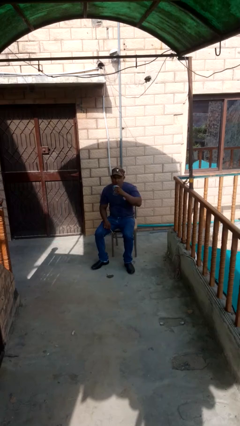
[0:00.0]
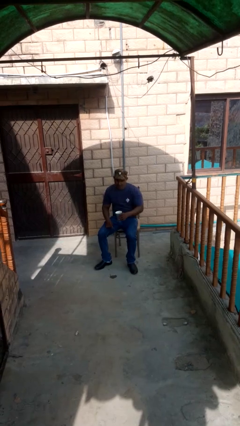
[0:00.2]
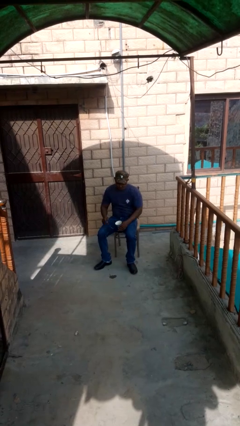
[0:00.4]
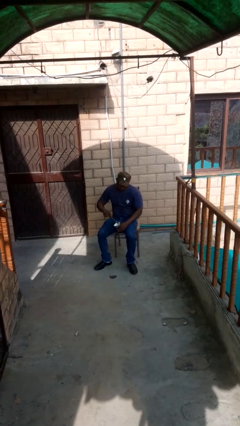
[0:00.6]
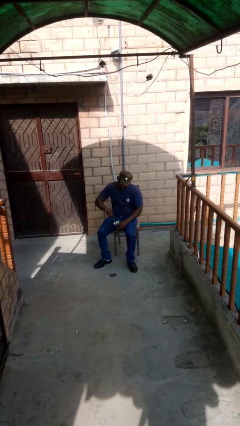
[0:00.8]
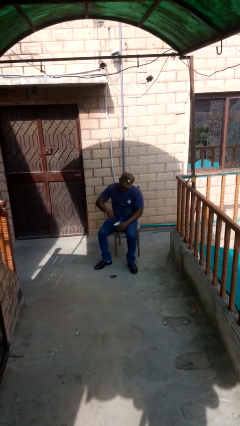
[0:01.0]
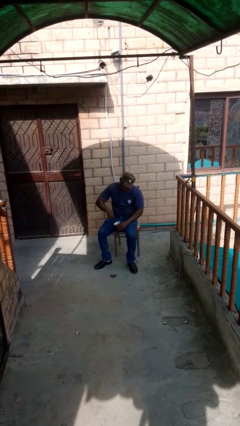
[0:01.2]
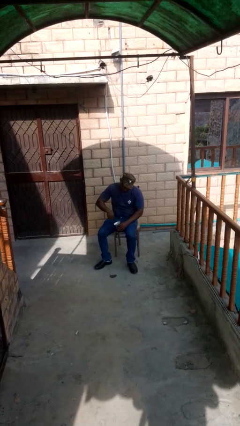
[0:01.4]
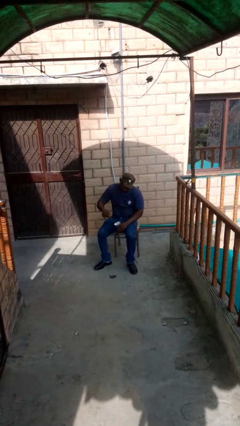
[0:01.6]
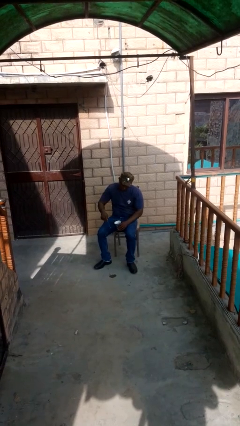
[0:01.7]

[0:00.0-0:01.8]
person stirs mug

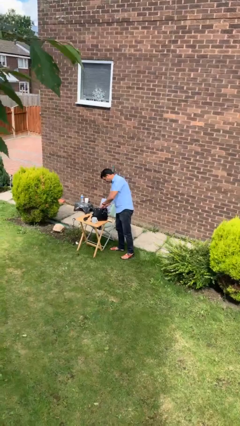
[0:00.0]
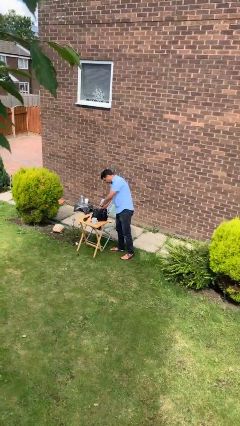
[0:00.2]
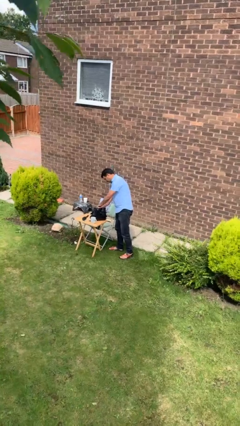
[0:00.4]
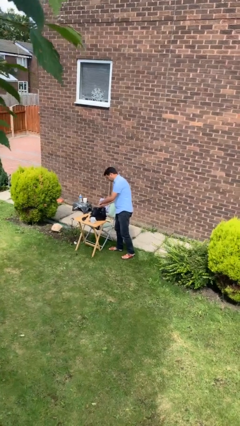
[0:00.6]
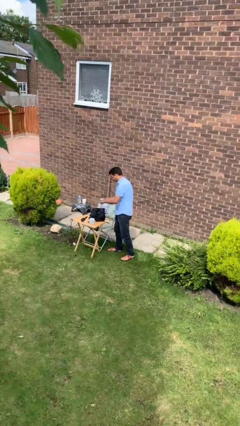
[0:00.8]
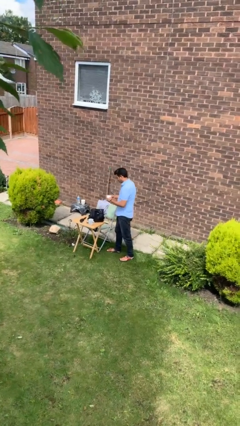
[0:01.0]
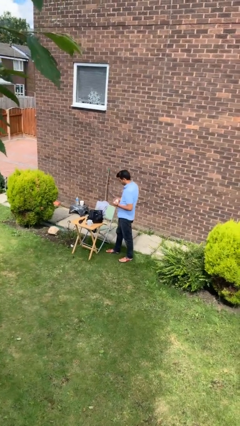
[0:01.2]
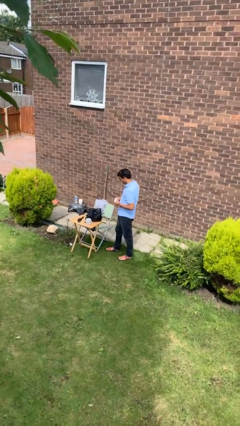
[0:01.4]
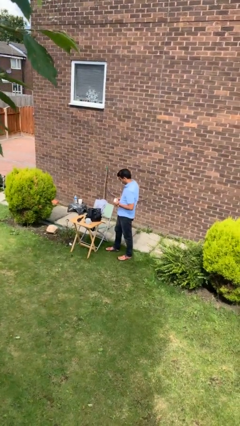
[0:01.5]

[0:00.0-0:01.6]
person takes object from backpack

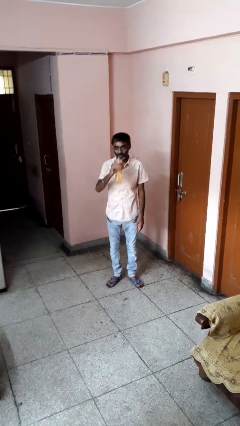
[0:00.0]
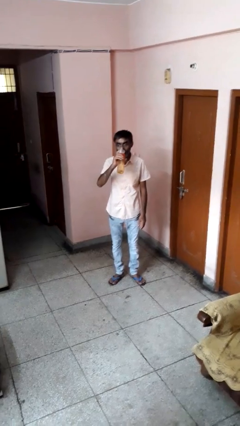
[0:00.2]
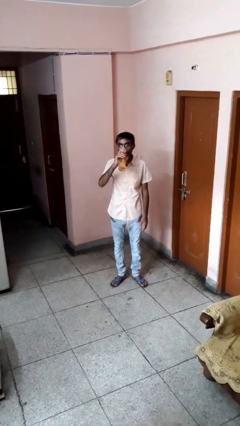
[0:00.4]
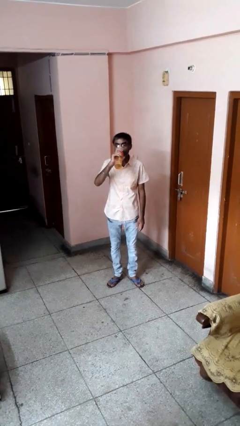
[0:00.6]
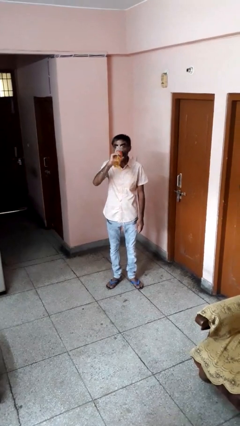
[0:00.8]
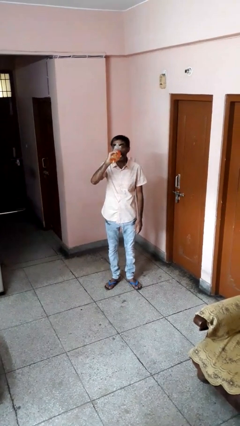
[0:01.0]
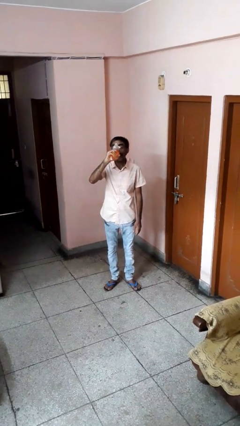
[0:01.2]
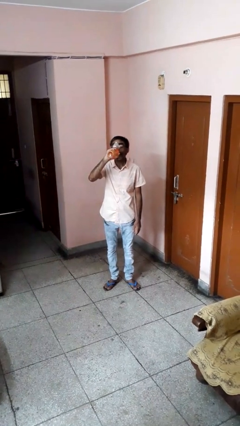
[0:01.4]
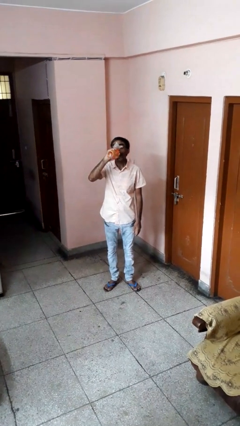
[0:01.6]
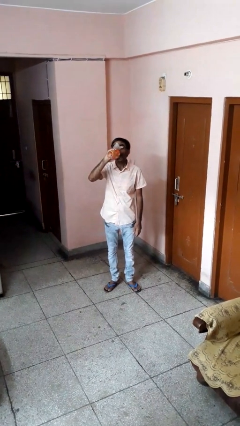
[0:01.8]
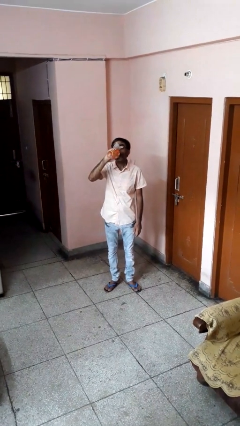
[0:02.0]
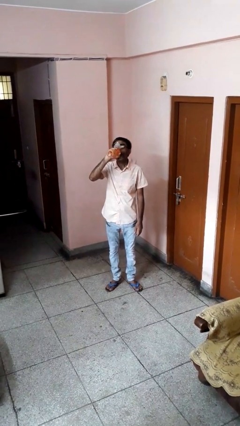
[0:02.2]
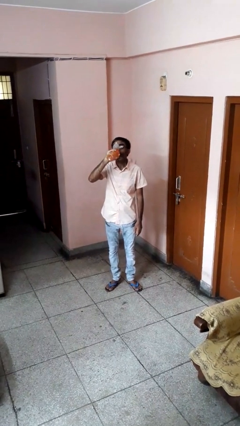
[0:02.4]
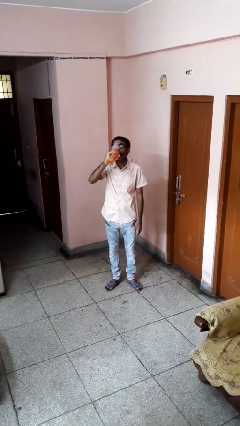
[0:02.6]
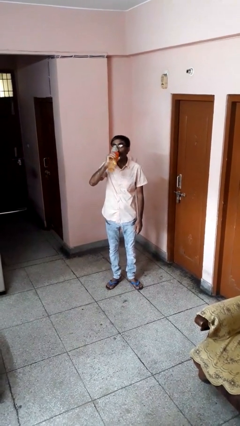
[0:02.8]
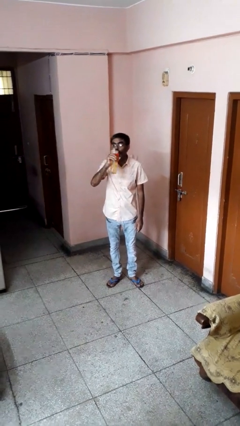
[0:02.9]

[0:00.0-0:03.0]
person drinks from bottle

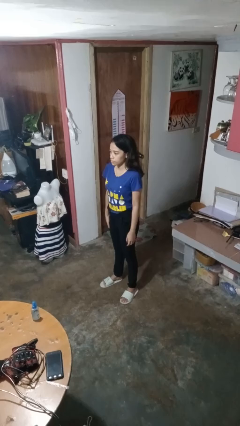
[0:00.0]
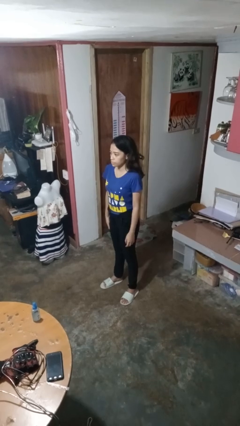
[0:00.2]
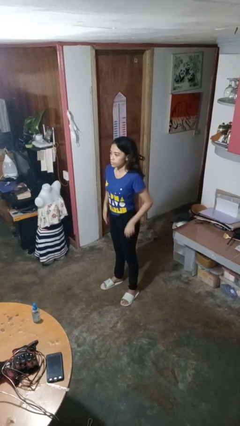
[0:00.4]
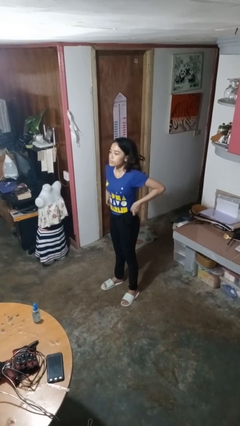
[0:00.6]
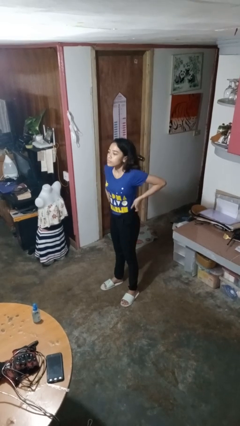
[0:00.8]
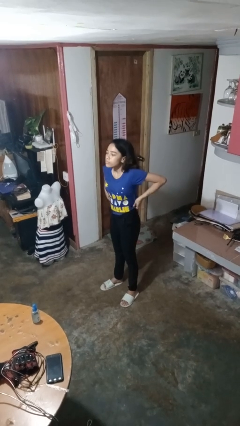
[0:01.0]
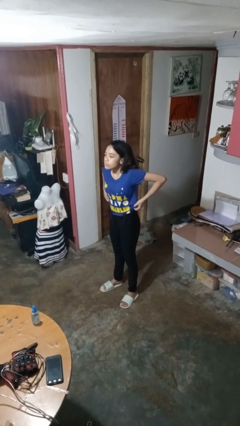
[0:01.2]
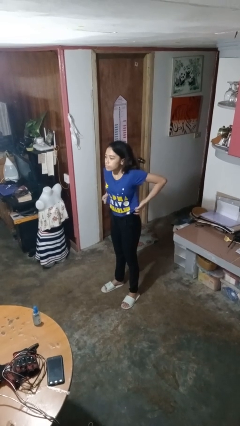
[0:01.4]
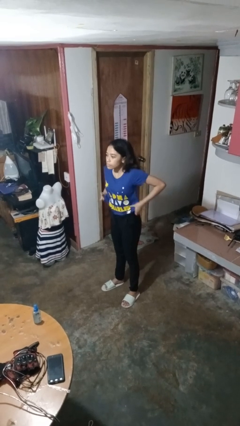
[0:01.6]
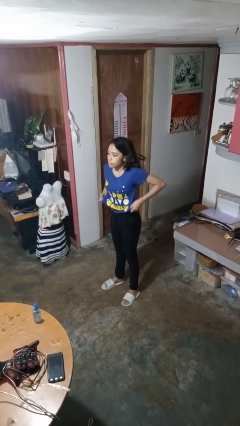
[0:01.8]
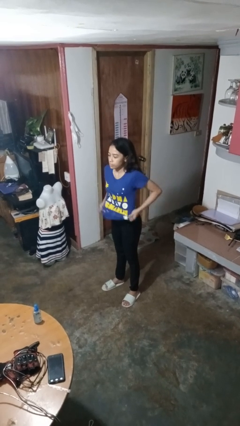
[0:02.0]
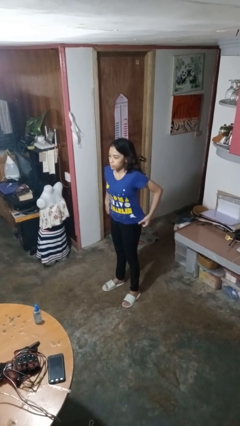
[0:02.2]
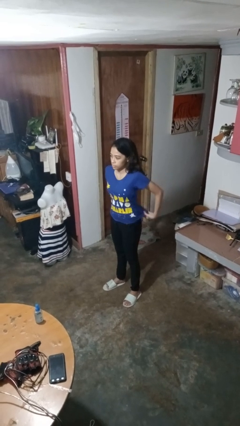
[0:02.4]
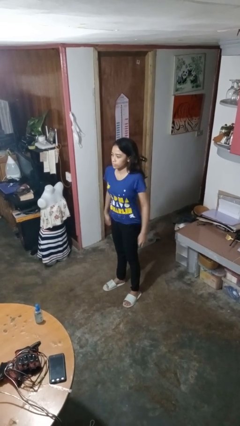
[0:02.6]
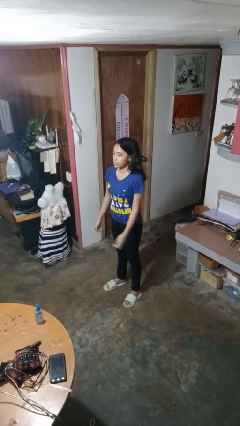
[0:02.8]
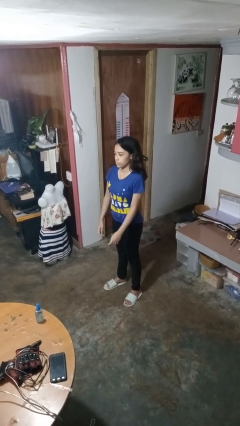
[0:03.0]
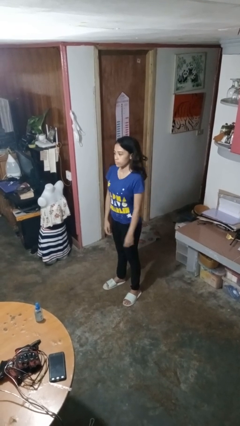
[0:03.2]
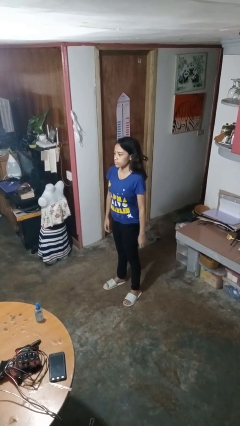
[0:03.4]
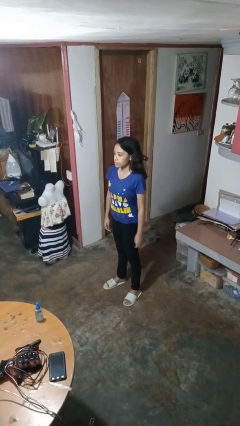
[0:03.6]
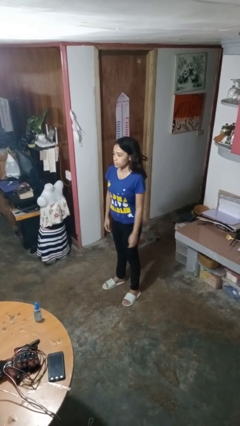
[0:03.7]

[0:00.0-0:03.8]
person untucks shirt

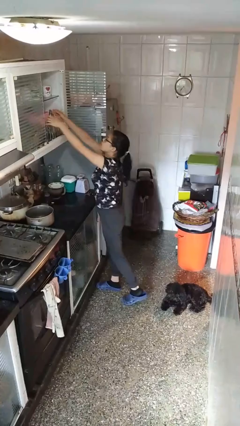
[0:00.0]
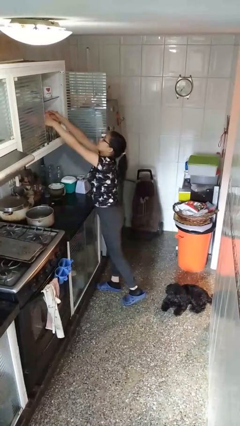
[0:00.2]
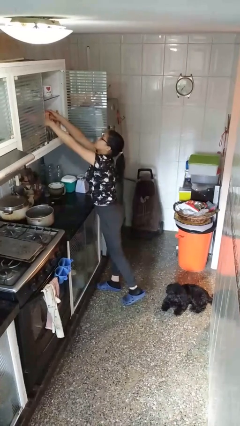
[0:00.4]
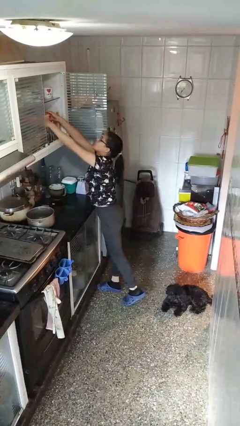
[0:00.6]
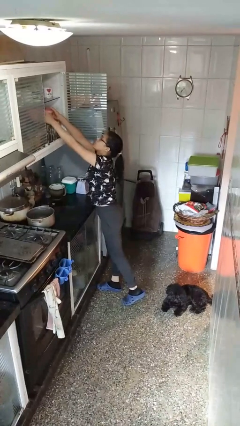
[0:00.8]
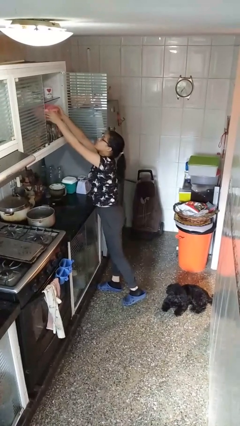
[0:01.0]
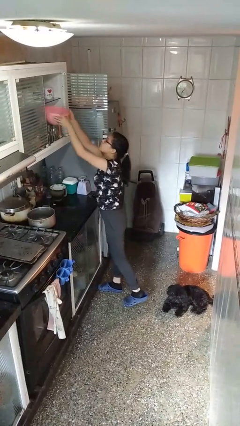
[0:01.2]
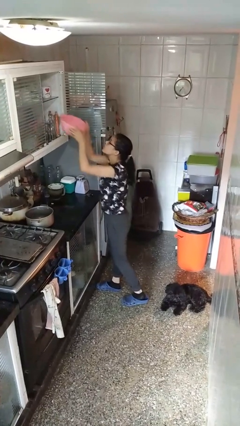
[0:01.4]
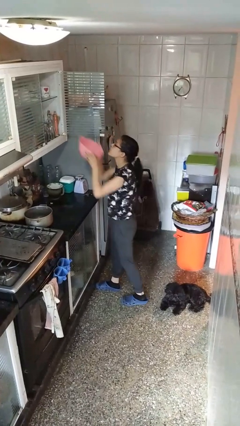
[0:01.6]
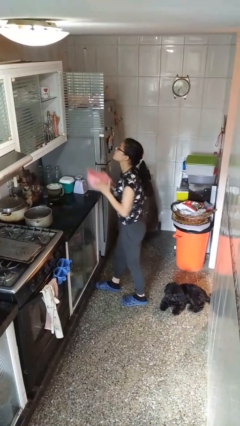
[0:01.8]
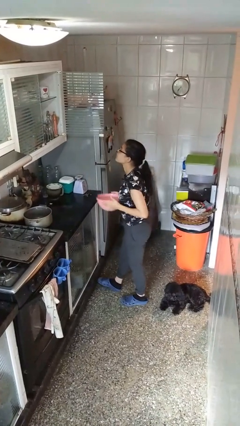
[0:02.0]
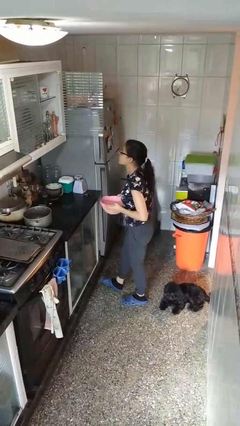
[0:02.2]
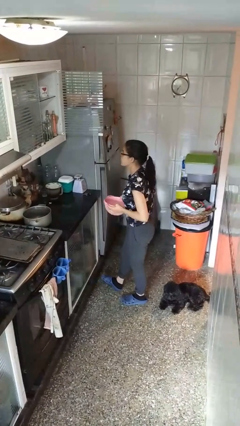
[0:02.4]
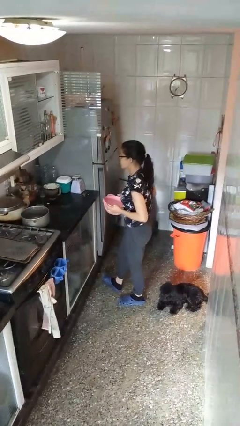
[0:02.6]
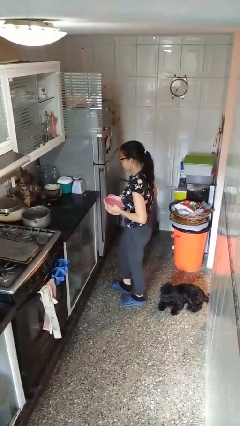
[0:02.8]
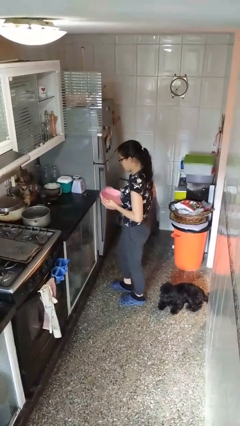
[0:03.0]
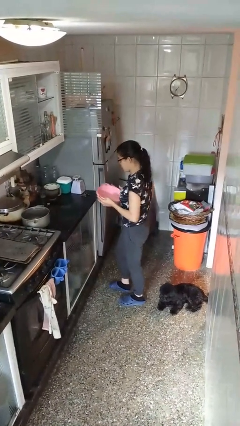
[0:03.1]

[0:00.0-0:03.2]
person picks up object from cabinet

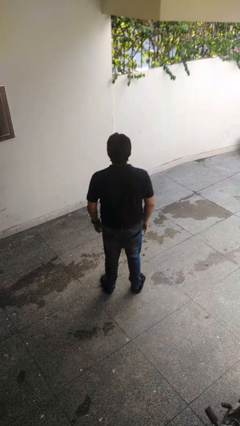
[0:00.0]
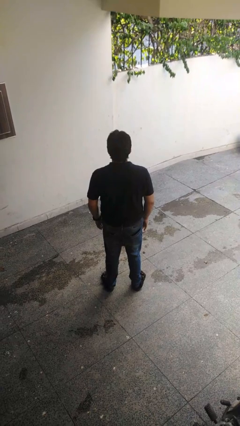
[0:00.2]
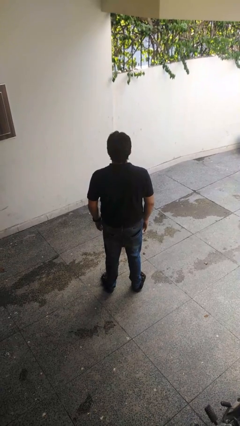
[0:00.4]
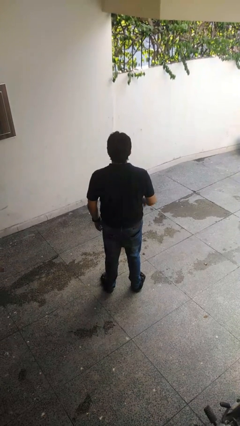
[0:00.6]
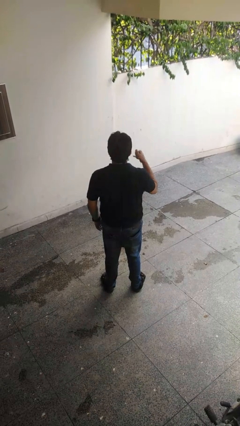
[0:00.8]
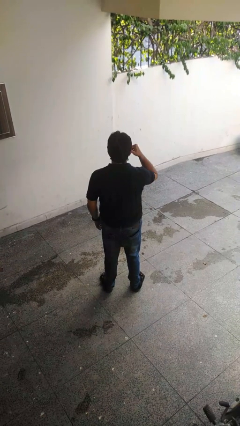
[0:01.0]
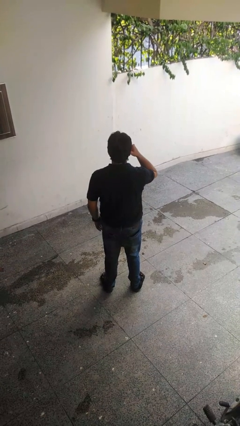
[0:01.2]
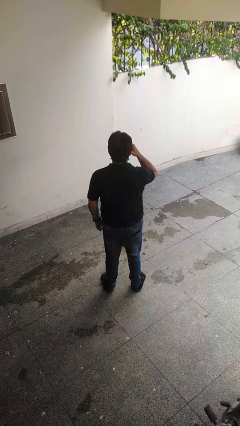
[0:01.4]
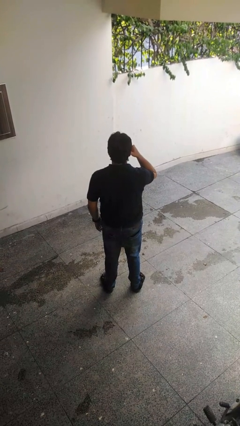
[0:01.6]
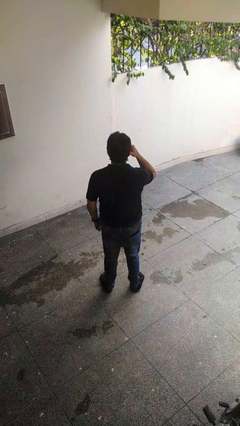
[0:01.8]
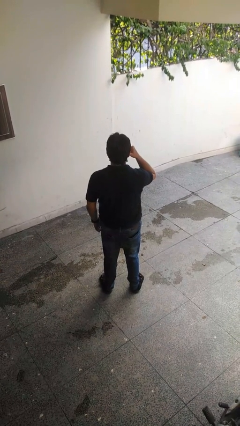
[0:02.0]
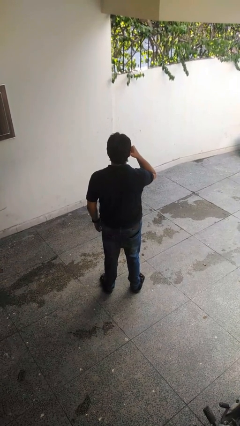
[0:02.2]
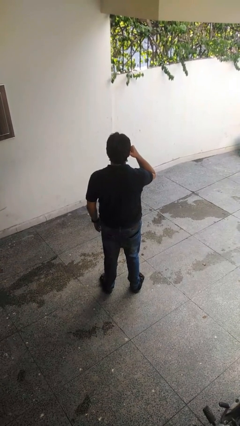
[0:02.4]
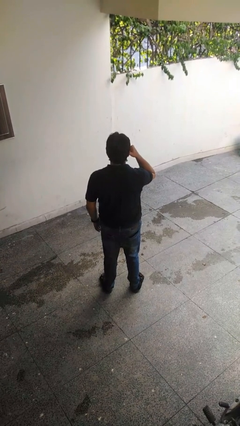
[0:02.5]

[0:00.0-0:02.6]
person gestures call me

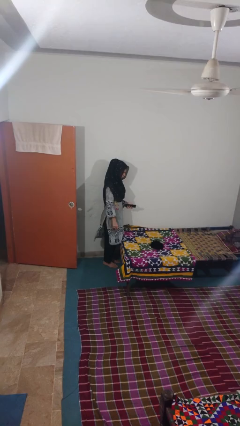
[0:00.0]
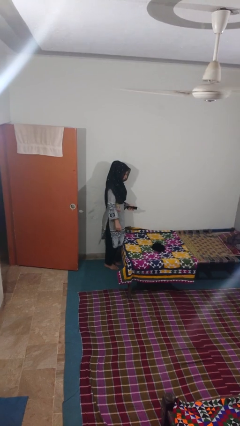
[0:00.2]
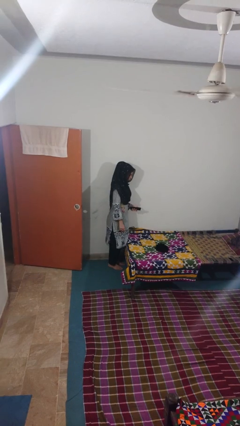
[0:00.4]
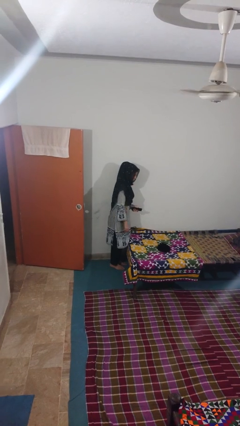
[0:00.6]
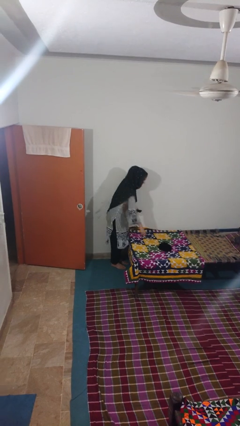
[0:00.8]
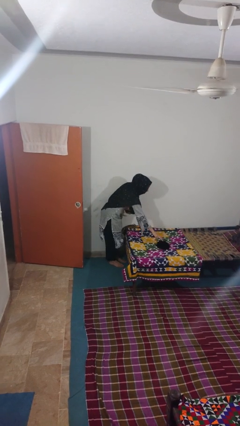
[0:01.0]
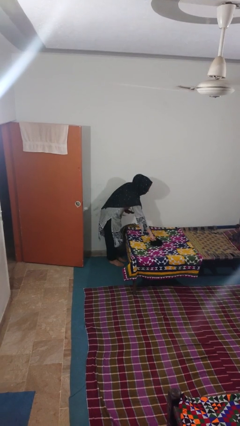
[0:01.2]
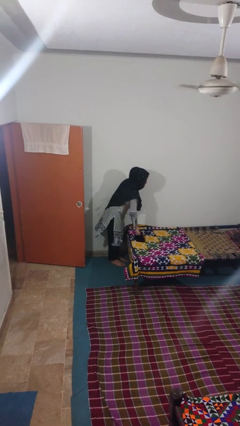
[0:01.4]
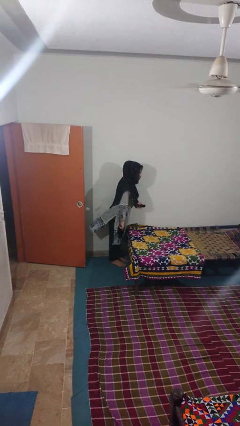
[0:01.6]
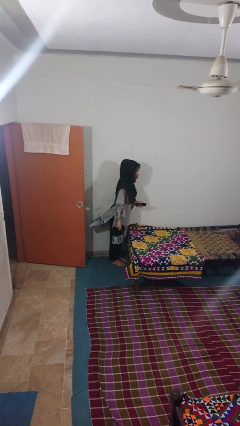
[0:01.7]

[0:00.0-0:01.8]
person picks up object from bed
